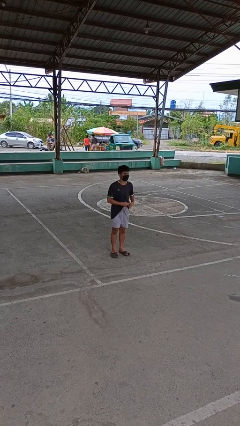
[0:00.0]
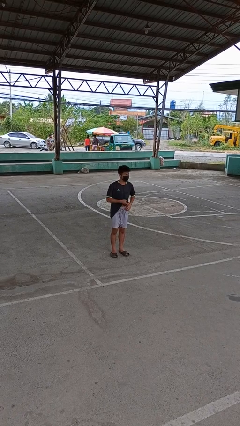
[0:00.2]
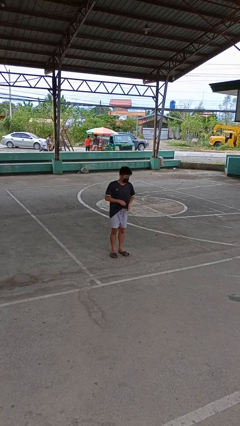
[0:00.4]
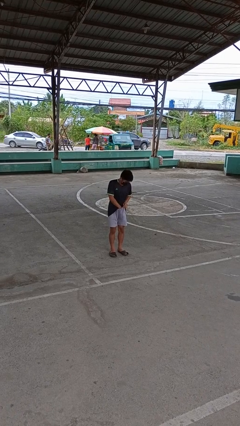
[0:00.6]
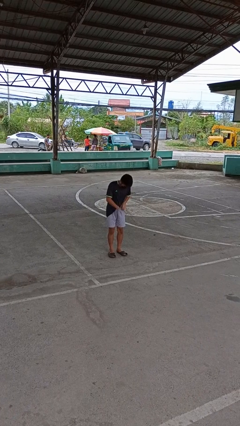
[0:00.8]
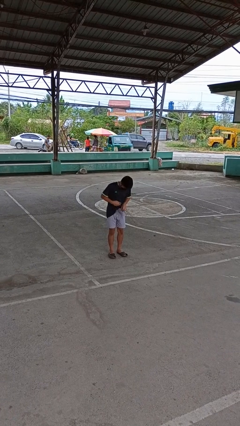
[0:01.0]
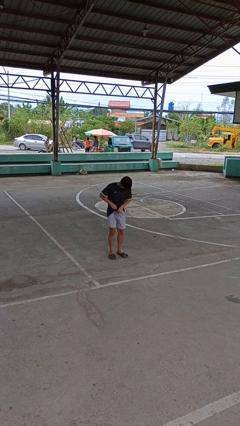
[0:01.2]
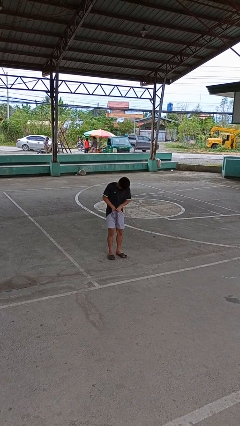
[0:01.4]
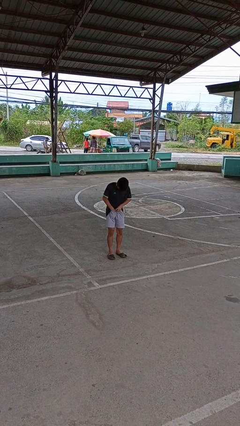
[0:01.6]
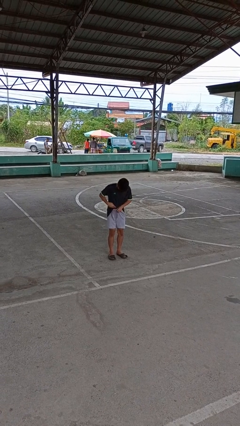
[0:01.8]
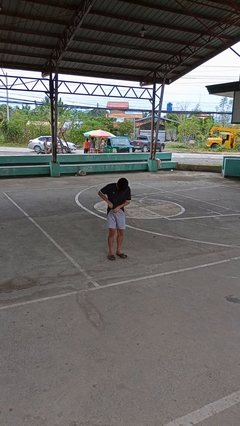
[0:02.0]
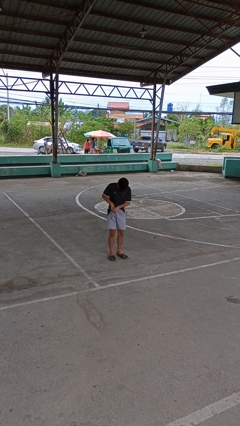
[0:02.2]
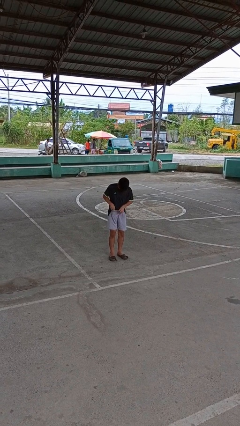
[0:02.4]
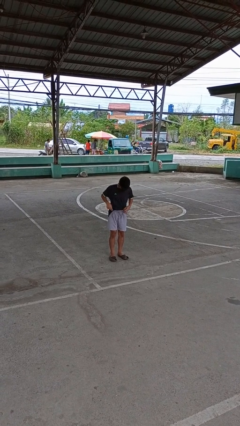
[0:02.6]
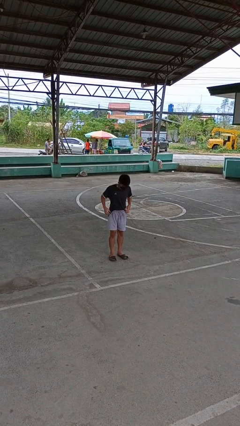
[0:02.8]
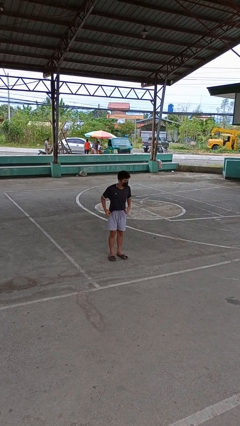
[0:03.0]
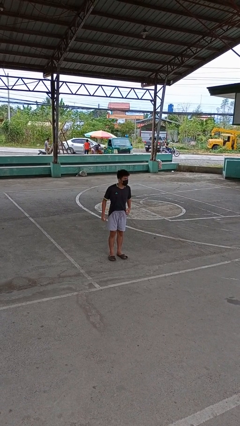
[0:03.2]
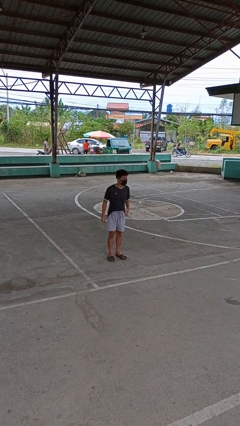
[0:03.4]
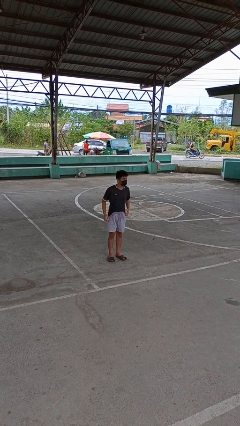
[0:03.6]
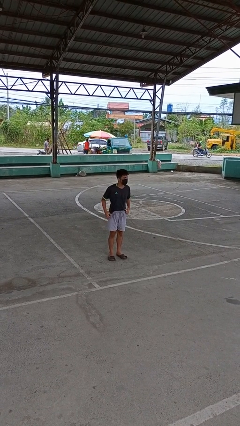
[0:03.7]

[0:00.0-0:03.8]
person tucks in shirt

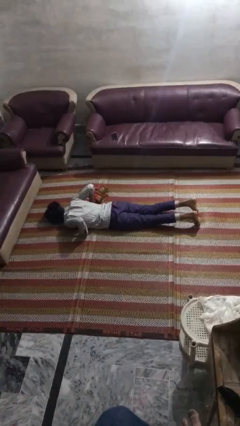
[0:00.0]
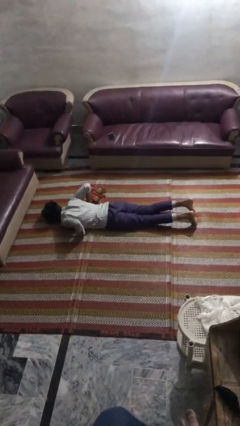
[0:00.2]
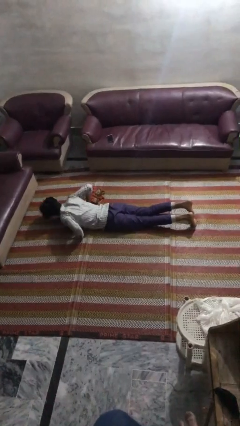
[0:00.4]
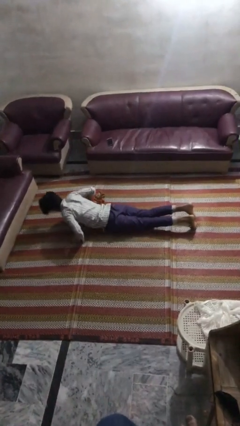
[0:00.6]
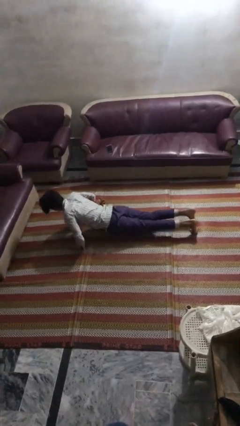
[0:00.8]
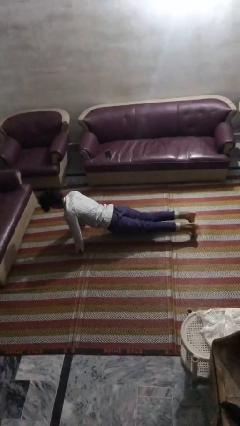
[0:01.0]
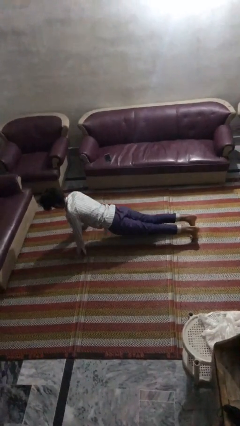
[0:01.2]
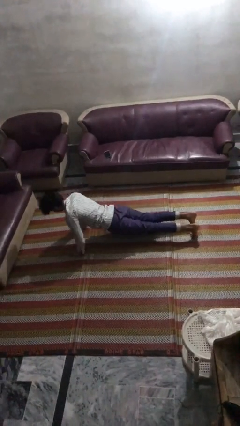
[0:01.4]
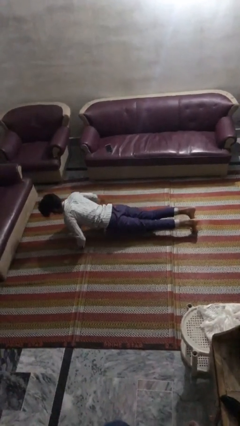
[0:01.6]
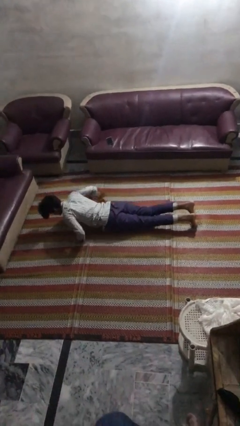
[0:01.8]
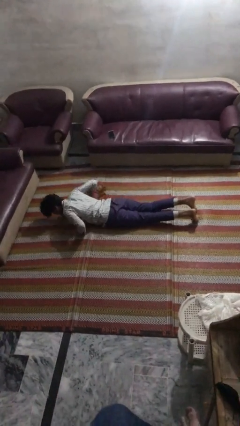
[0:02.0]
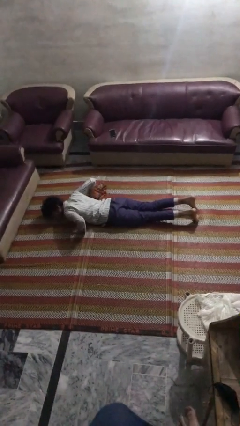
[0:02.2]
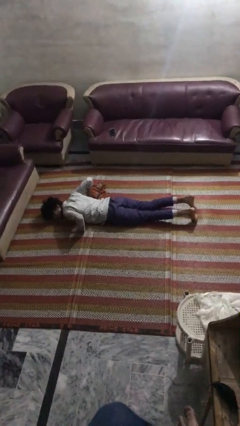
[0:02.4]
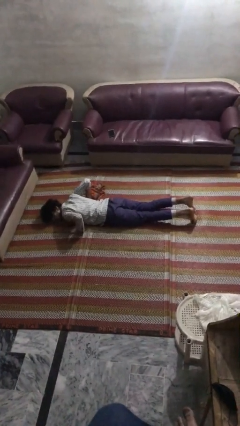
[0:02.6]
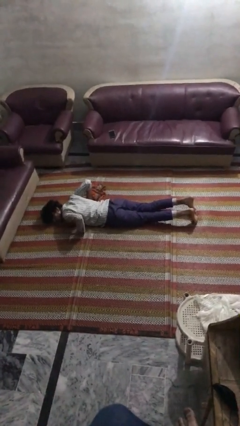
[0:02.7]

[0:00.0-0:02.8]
person exercises with pushup

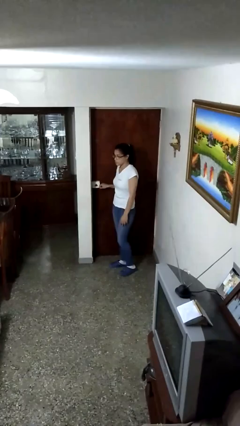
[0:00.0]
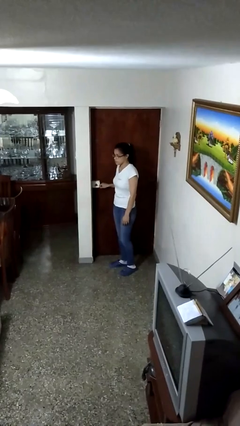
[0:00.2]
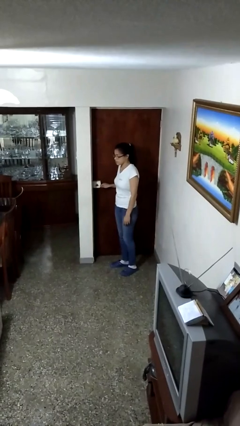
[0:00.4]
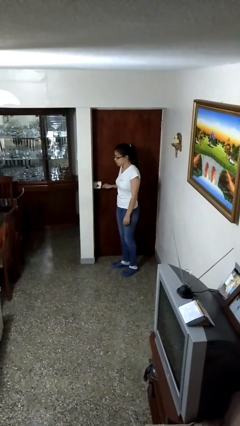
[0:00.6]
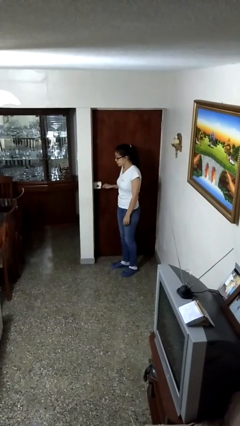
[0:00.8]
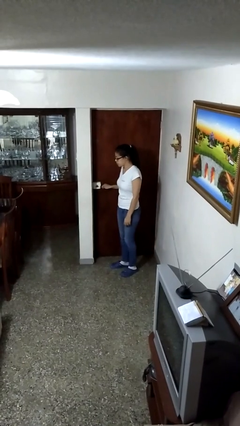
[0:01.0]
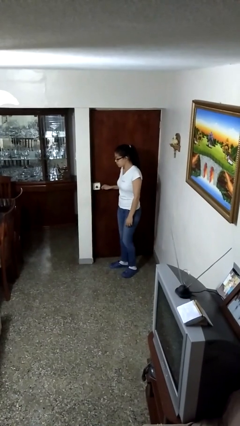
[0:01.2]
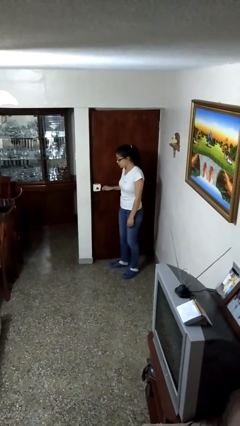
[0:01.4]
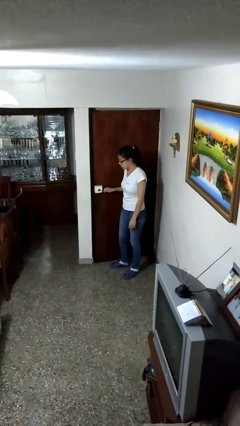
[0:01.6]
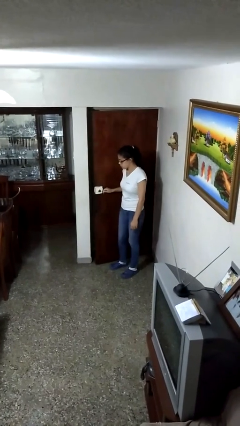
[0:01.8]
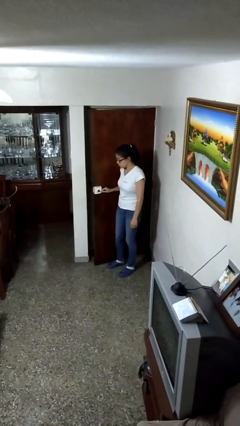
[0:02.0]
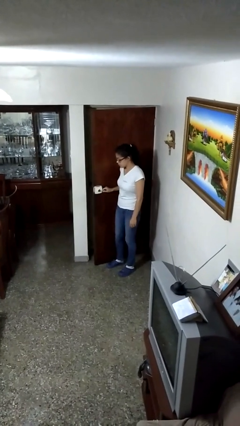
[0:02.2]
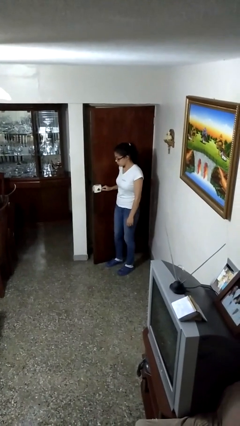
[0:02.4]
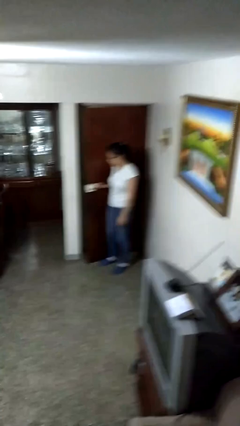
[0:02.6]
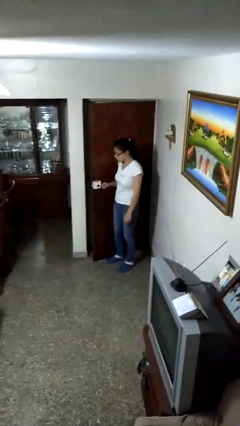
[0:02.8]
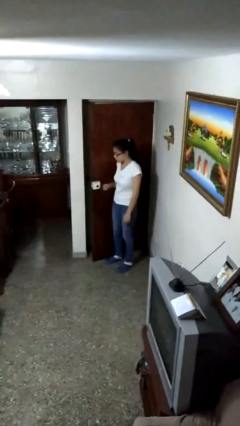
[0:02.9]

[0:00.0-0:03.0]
person opens facility door

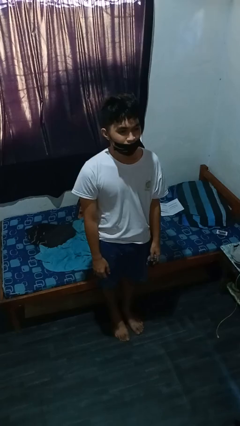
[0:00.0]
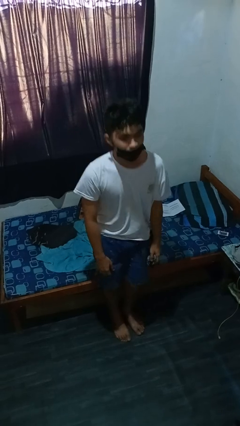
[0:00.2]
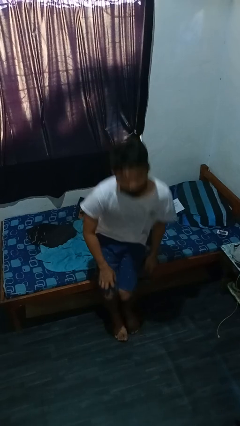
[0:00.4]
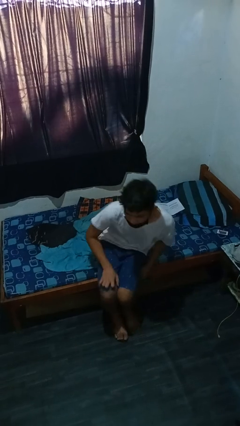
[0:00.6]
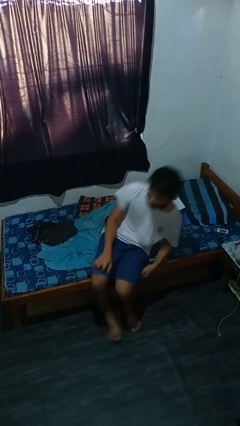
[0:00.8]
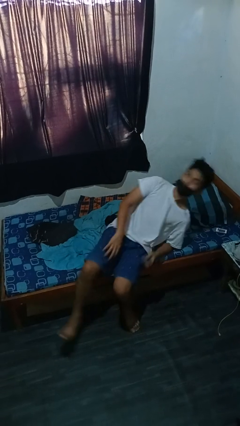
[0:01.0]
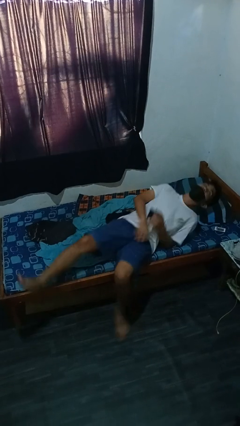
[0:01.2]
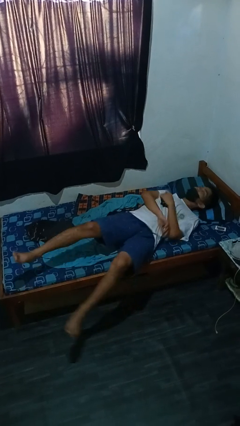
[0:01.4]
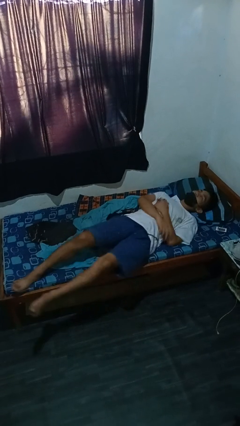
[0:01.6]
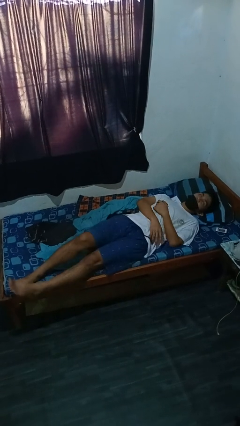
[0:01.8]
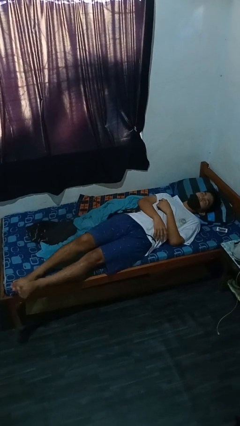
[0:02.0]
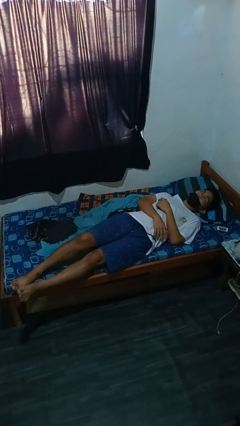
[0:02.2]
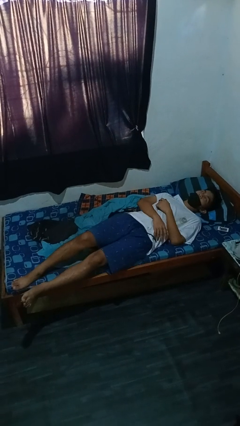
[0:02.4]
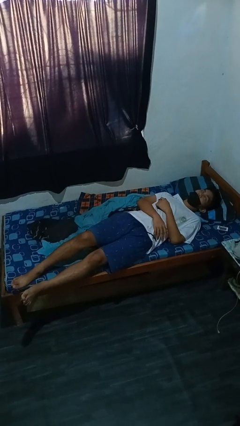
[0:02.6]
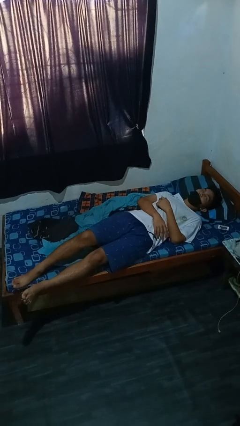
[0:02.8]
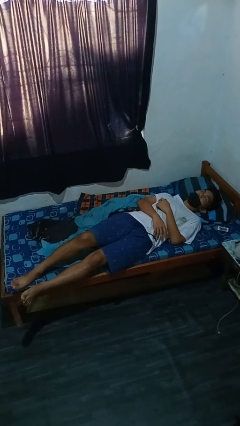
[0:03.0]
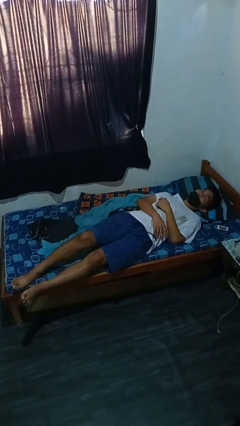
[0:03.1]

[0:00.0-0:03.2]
person lies down on bed

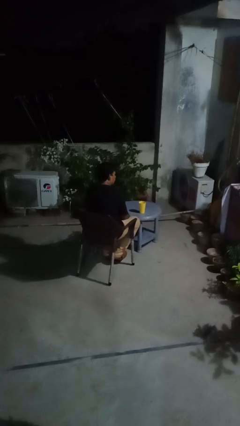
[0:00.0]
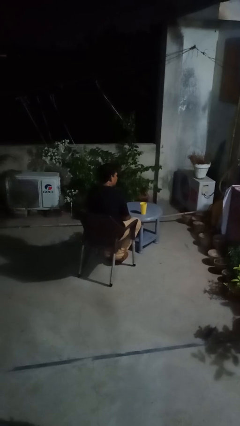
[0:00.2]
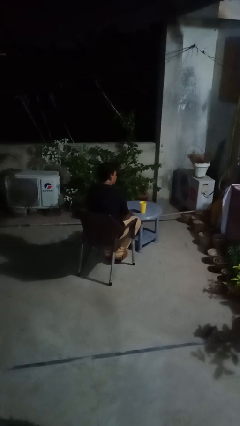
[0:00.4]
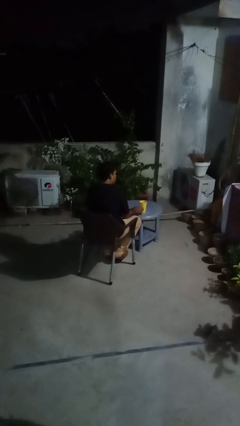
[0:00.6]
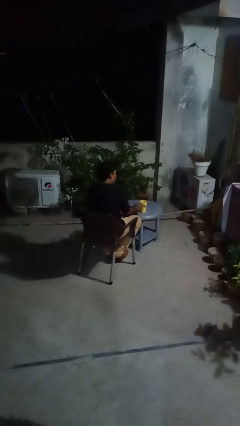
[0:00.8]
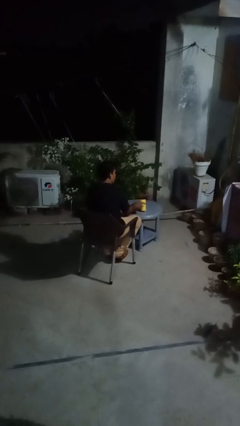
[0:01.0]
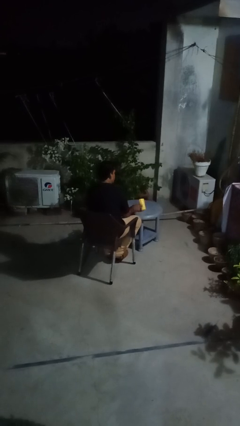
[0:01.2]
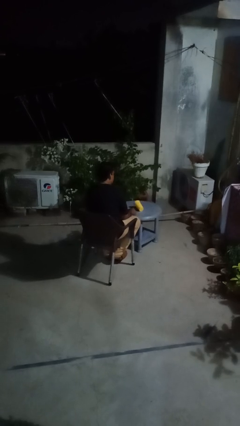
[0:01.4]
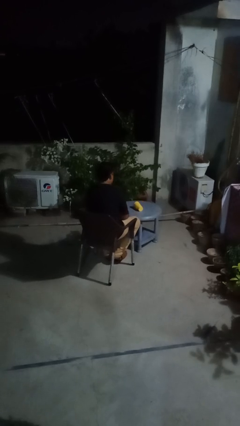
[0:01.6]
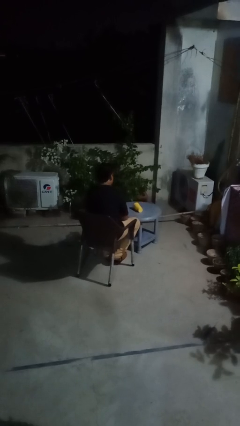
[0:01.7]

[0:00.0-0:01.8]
person knocks over glass

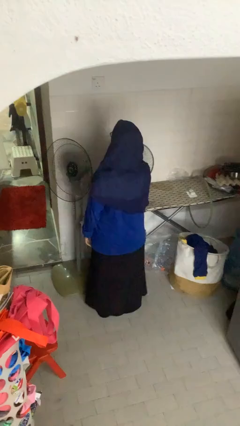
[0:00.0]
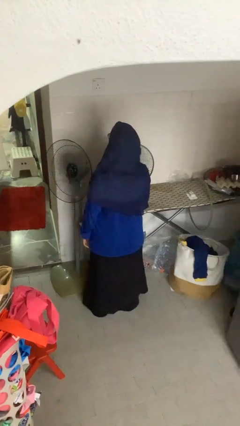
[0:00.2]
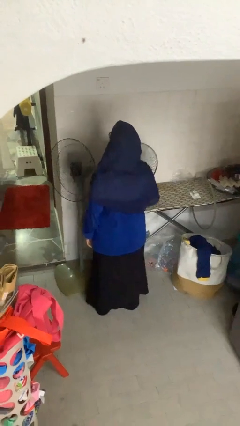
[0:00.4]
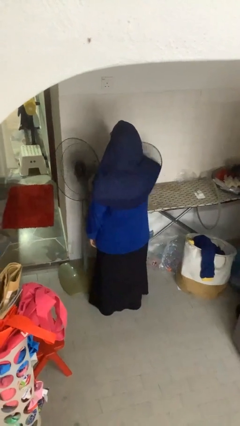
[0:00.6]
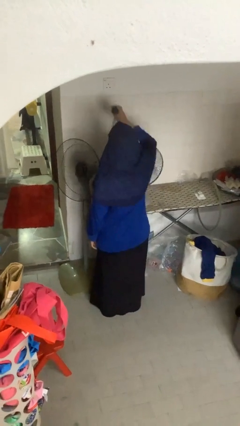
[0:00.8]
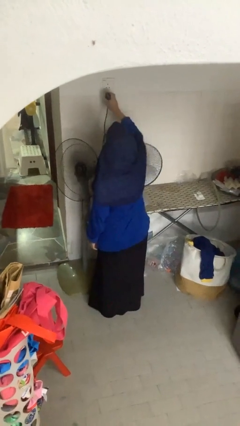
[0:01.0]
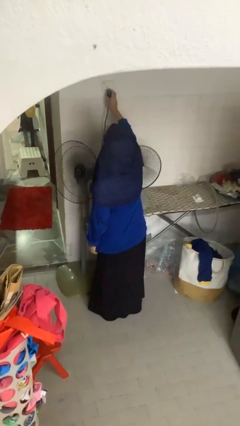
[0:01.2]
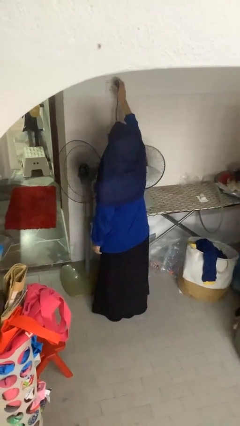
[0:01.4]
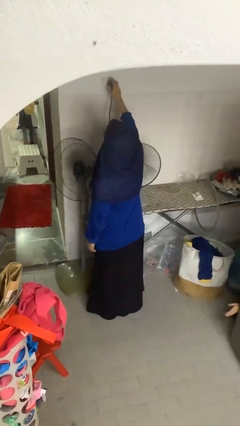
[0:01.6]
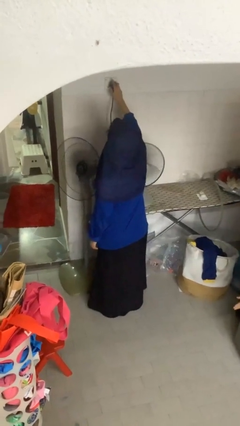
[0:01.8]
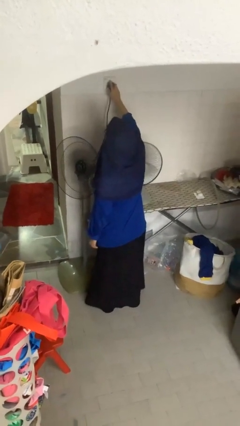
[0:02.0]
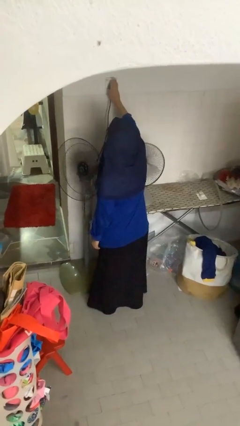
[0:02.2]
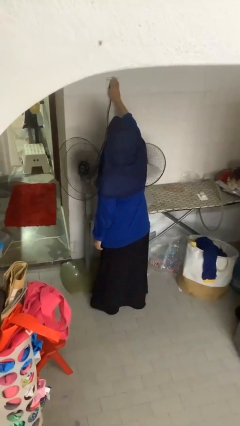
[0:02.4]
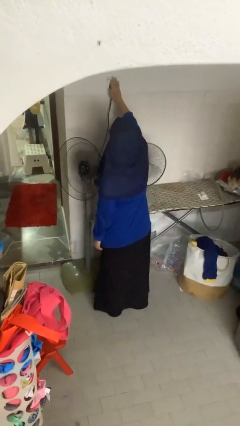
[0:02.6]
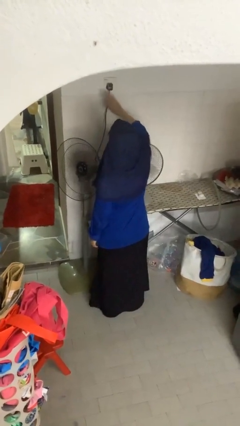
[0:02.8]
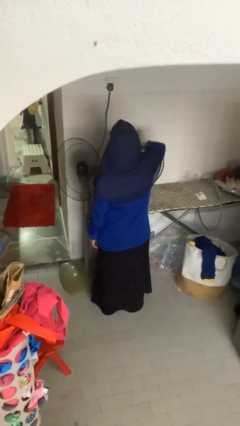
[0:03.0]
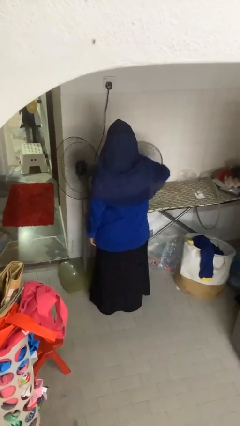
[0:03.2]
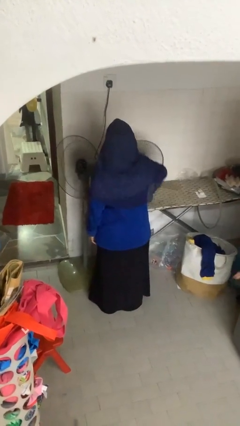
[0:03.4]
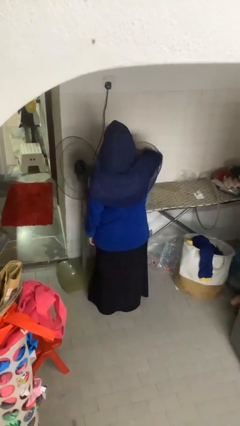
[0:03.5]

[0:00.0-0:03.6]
person plugs into electrical socket
